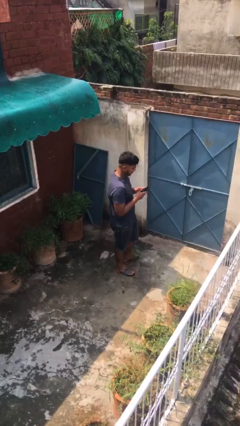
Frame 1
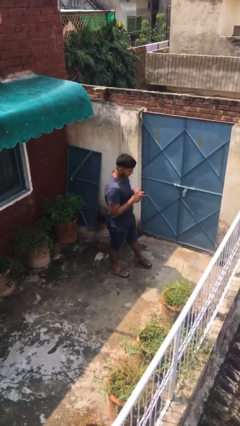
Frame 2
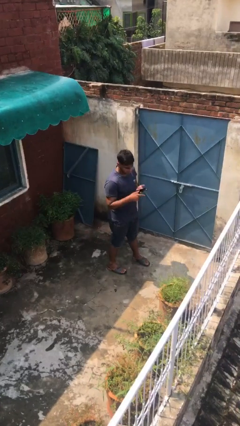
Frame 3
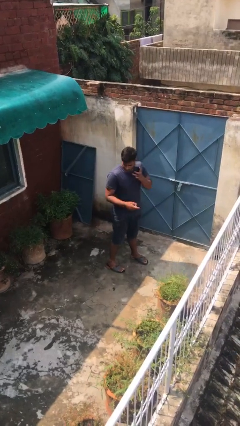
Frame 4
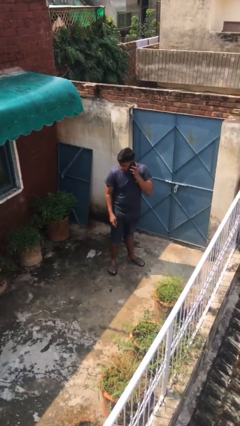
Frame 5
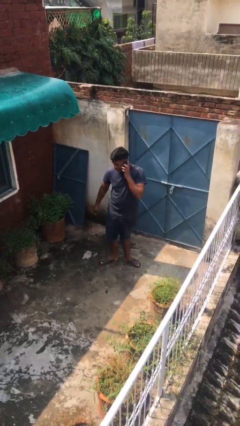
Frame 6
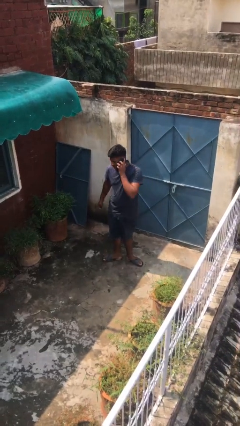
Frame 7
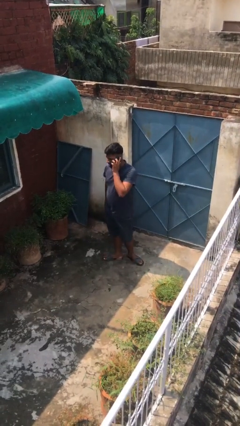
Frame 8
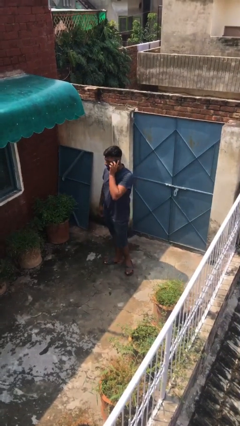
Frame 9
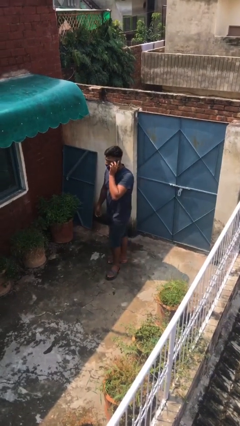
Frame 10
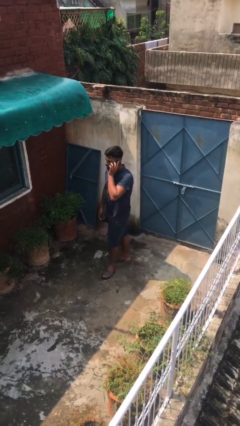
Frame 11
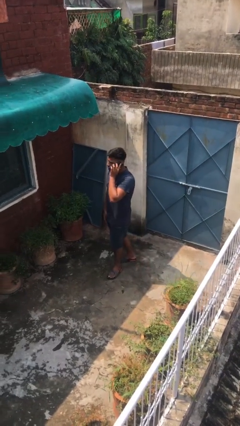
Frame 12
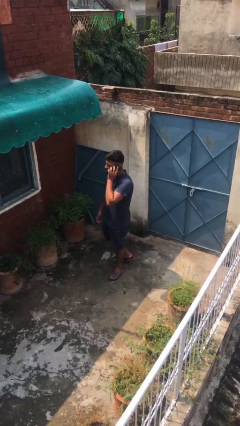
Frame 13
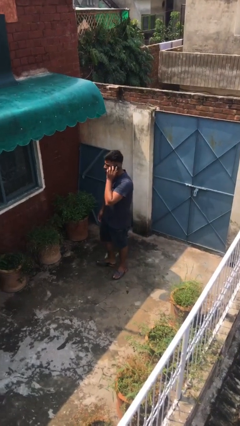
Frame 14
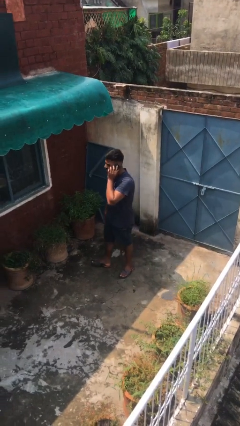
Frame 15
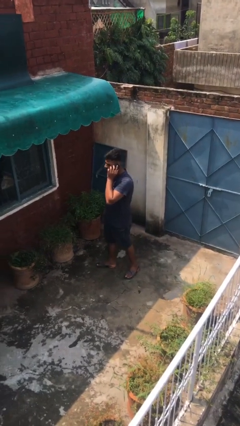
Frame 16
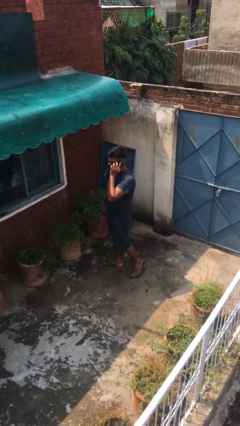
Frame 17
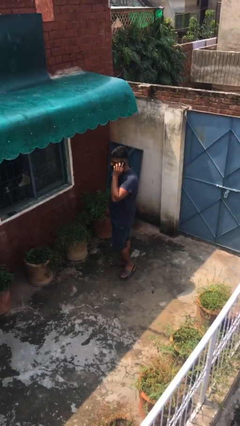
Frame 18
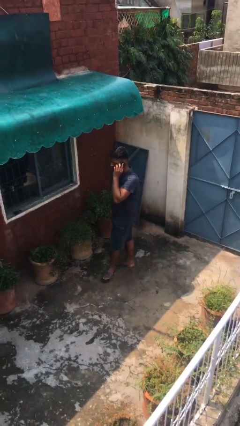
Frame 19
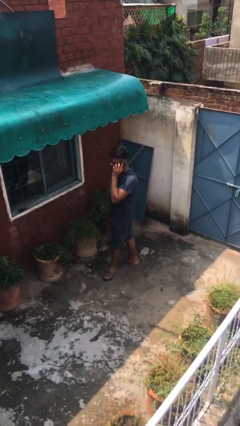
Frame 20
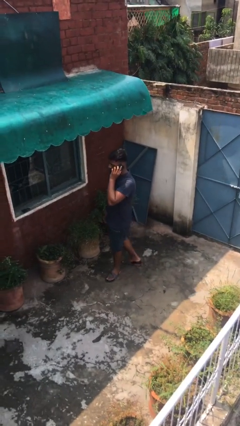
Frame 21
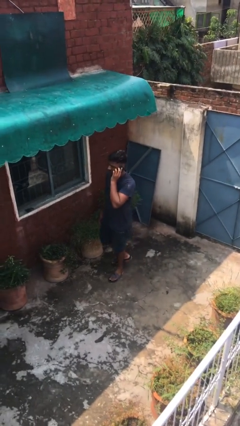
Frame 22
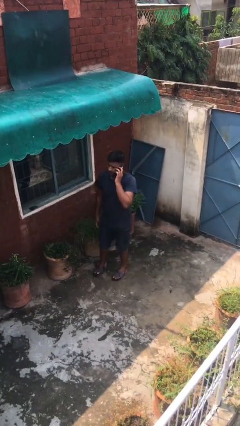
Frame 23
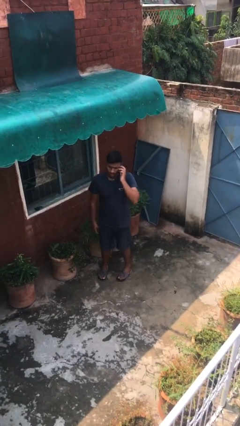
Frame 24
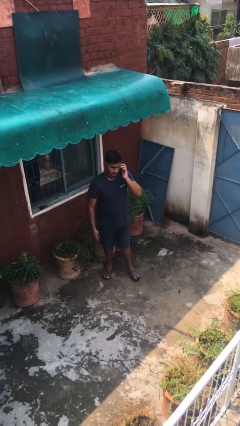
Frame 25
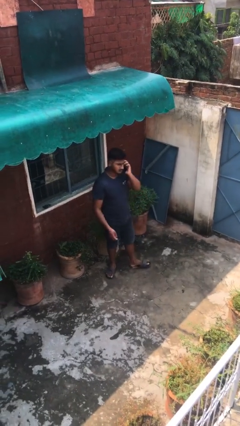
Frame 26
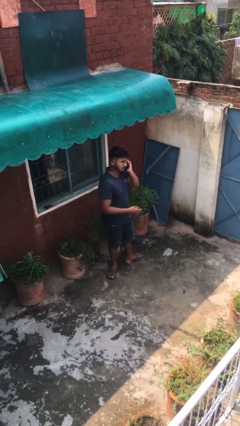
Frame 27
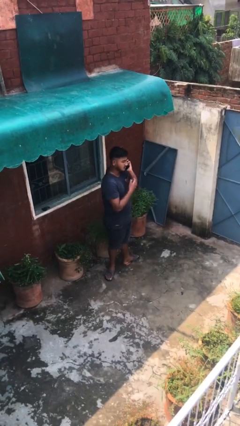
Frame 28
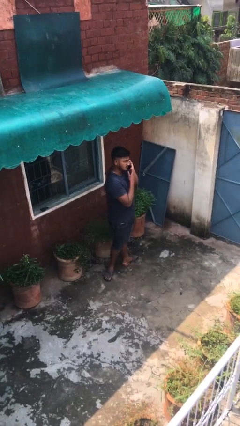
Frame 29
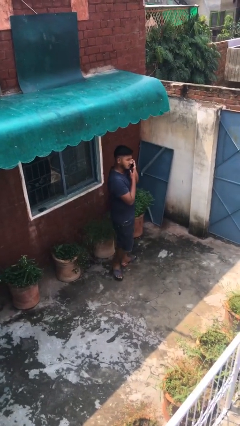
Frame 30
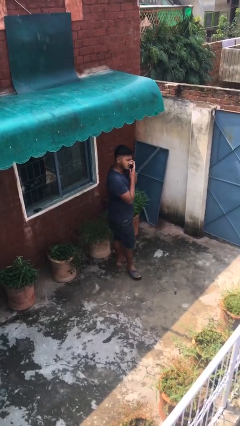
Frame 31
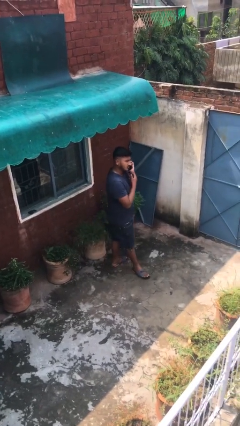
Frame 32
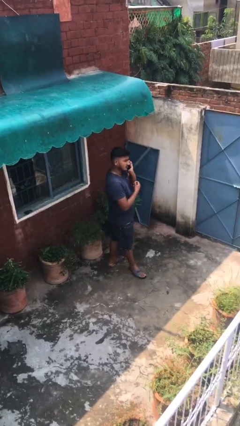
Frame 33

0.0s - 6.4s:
person talks on phone

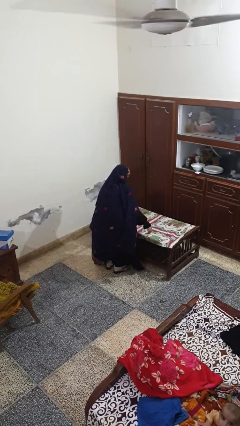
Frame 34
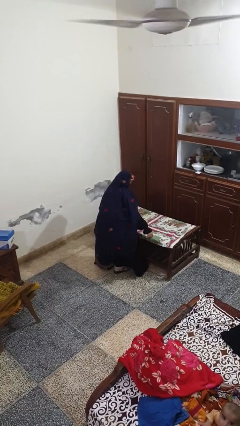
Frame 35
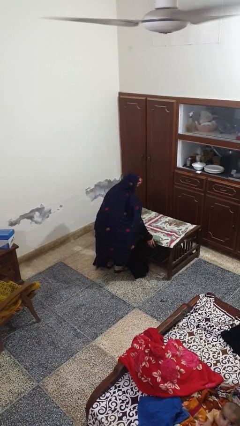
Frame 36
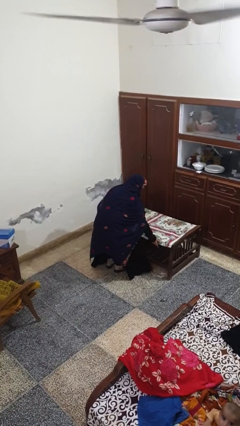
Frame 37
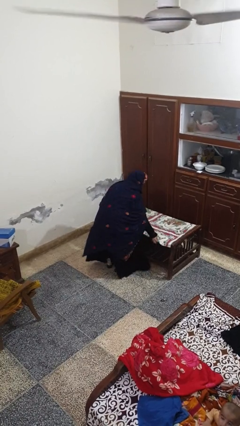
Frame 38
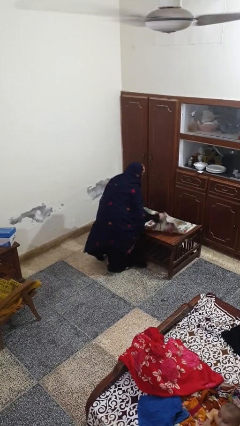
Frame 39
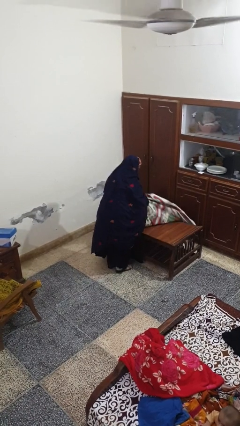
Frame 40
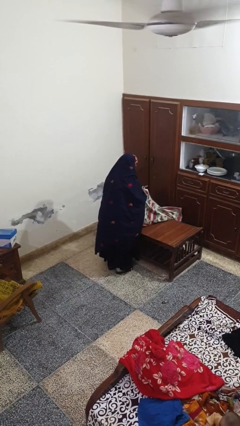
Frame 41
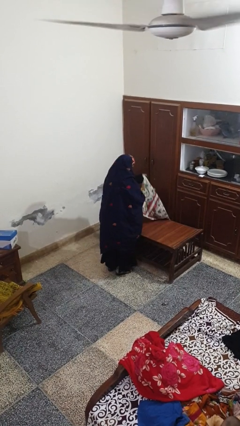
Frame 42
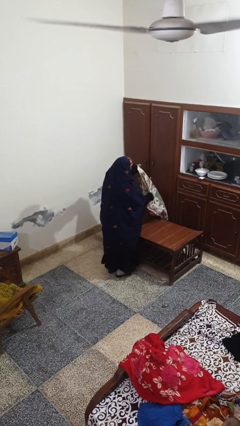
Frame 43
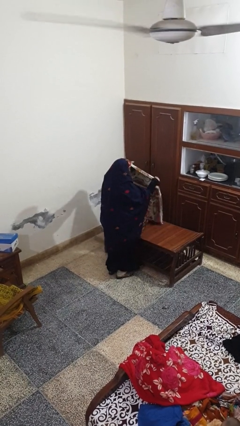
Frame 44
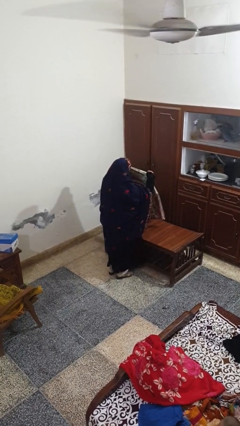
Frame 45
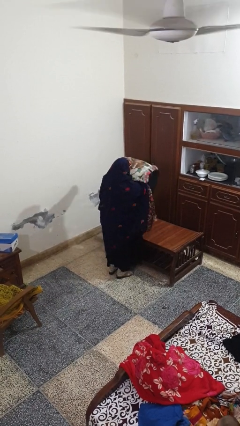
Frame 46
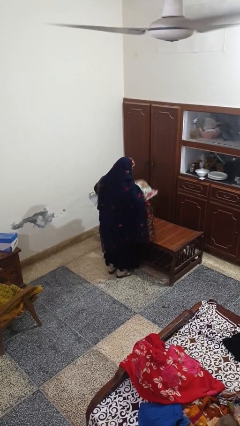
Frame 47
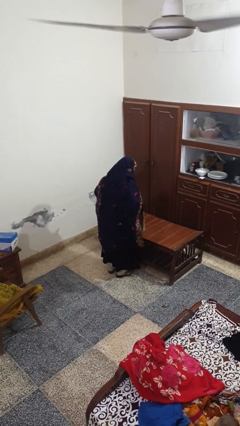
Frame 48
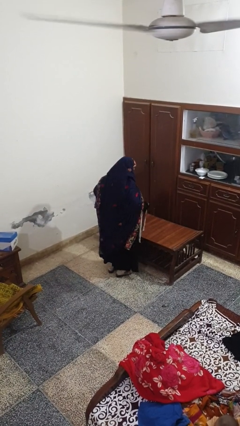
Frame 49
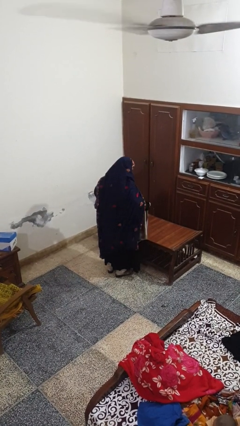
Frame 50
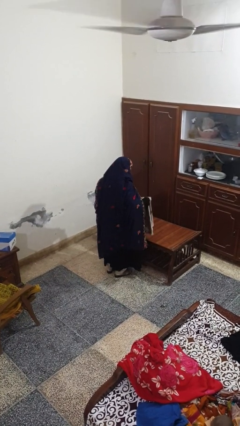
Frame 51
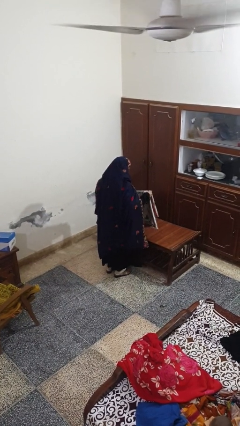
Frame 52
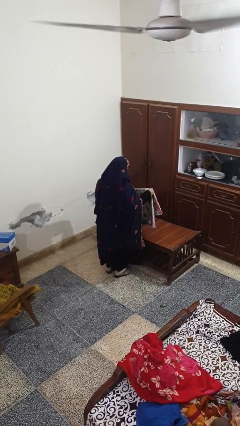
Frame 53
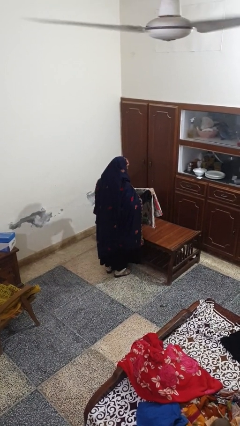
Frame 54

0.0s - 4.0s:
person folds tablecloth

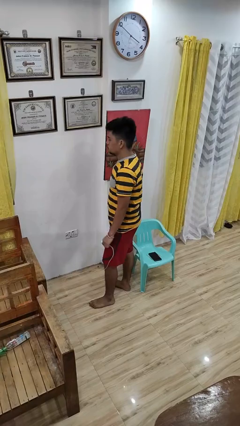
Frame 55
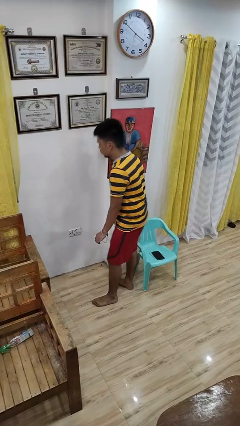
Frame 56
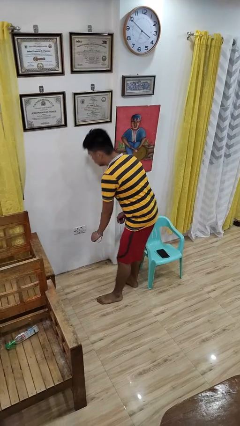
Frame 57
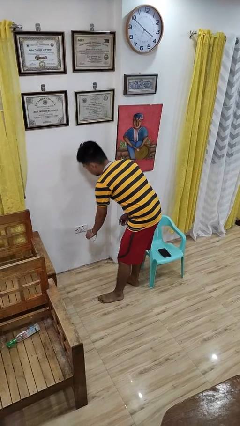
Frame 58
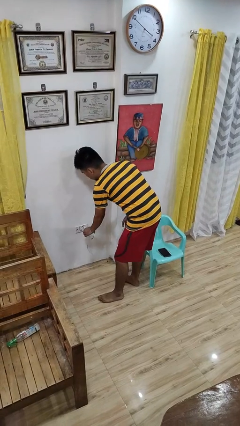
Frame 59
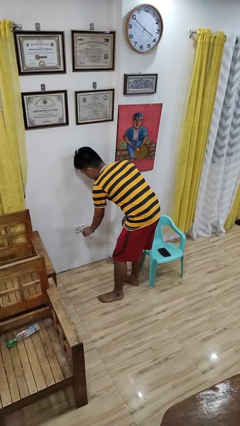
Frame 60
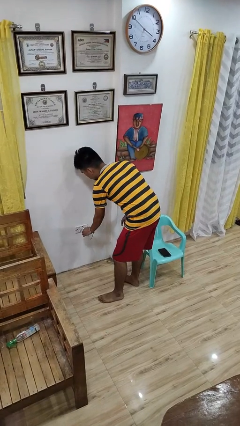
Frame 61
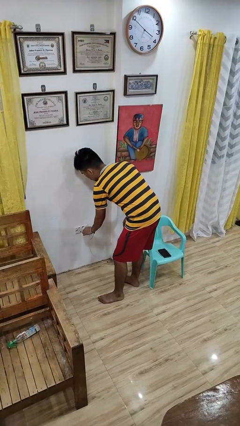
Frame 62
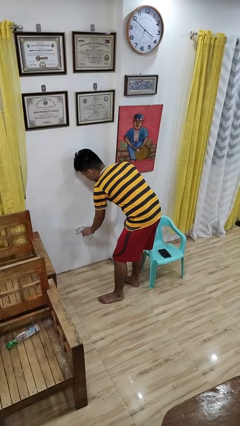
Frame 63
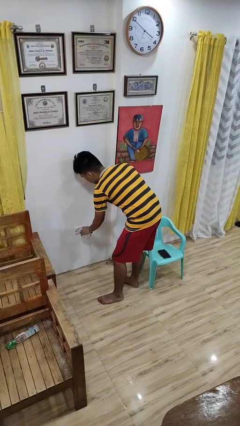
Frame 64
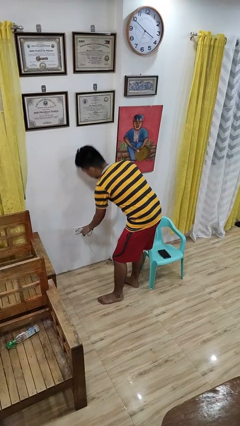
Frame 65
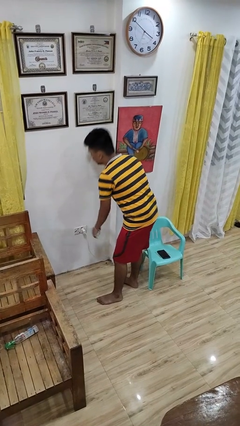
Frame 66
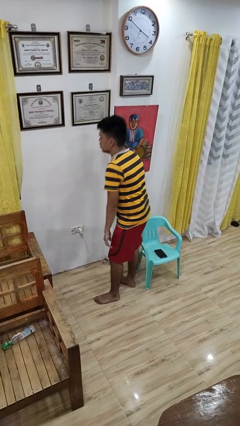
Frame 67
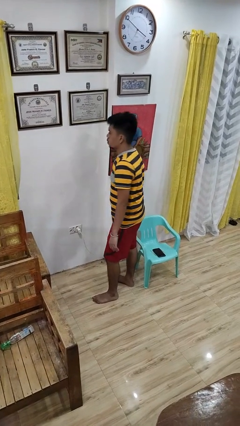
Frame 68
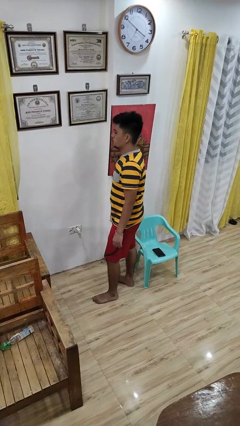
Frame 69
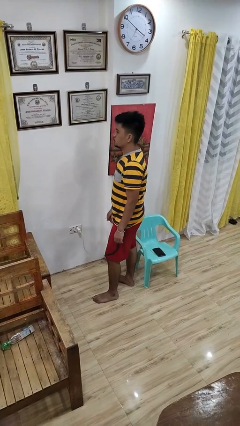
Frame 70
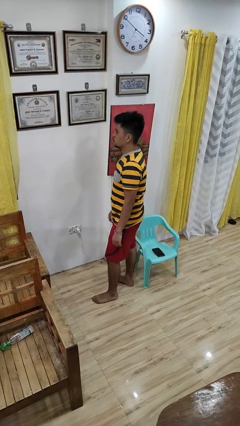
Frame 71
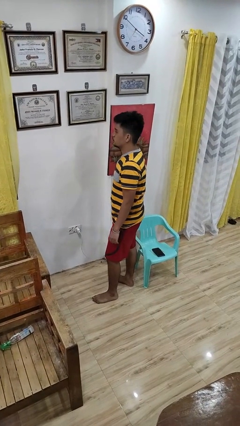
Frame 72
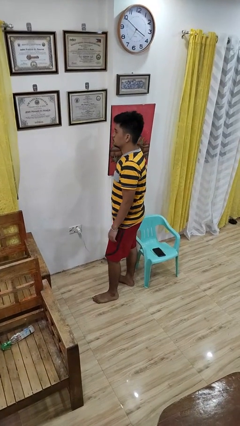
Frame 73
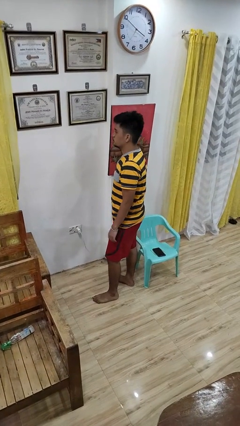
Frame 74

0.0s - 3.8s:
person plugs into electrical socket

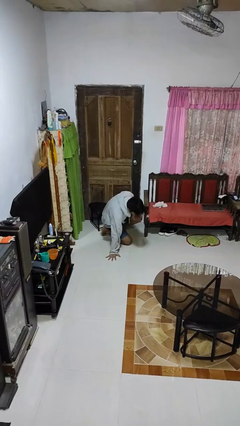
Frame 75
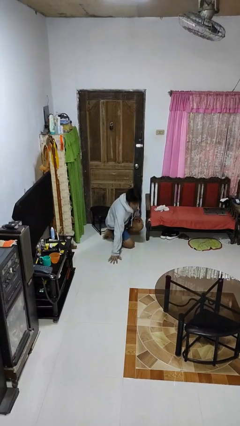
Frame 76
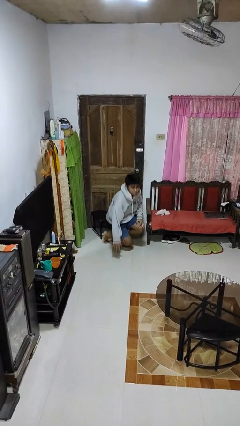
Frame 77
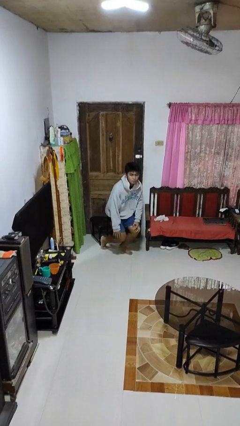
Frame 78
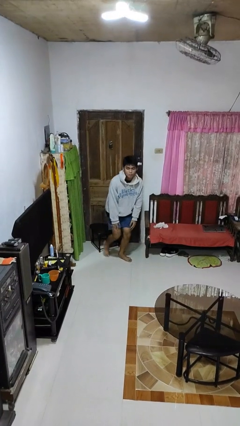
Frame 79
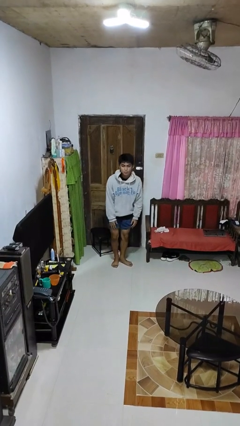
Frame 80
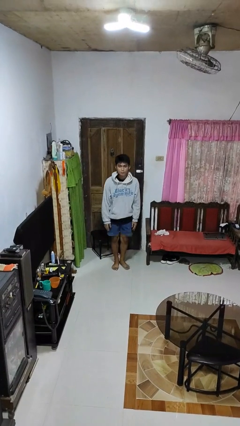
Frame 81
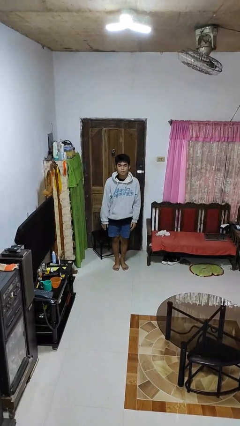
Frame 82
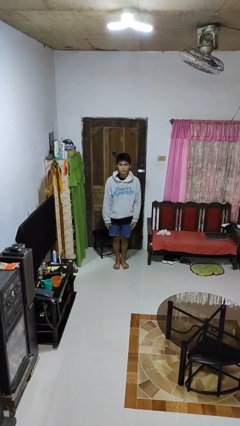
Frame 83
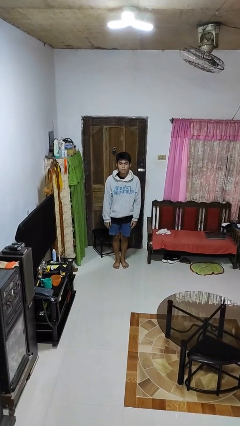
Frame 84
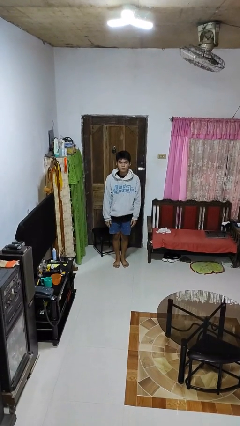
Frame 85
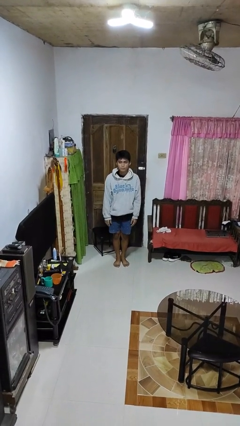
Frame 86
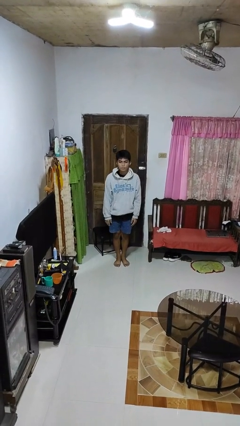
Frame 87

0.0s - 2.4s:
person stands up from floor

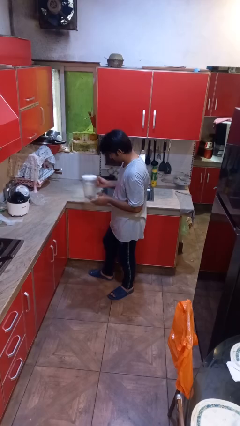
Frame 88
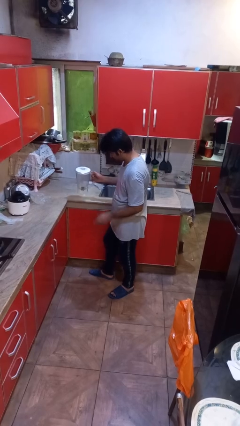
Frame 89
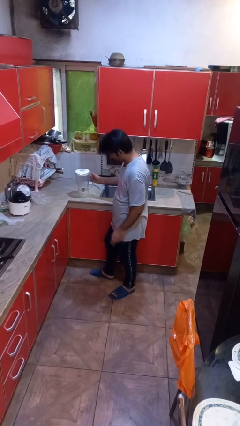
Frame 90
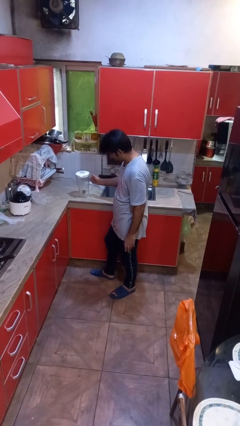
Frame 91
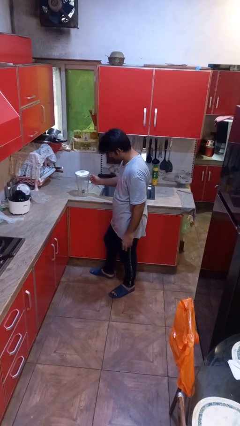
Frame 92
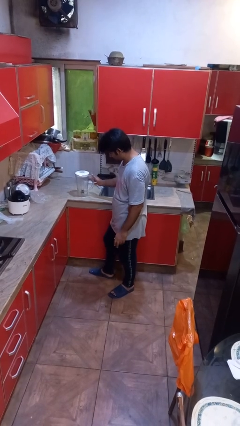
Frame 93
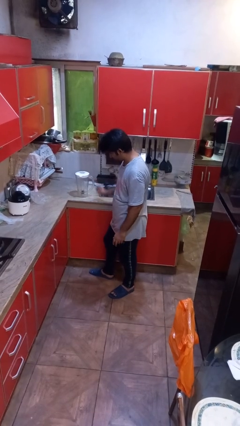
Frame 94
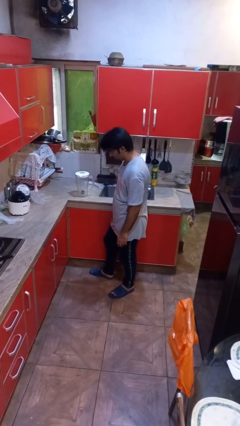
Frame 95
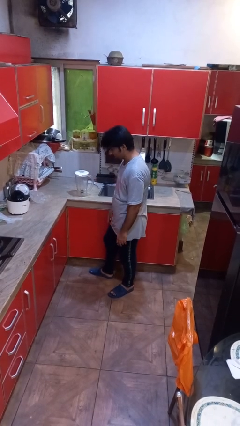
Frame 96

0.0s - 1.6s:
person puts down object on countertop
